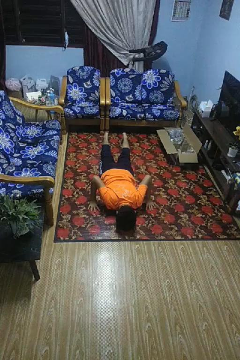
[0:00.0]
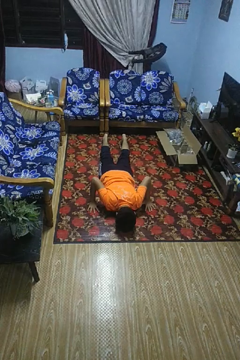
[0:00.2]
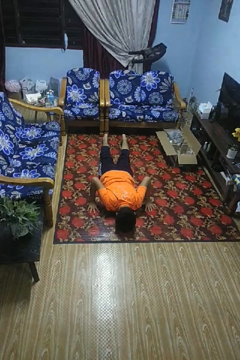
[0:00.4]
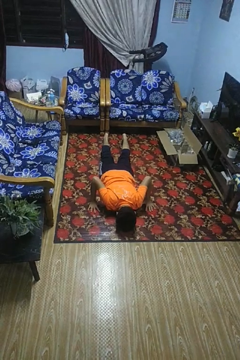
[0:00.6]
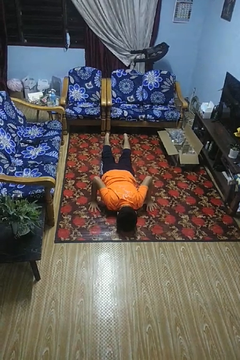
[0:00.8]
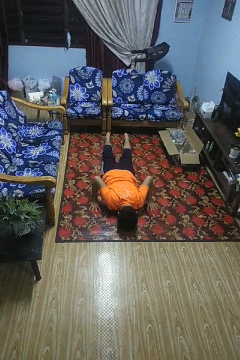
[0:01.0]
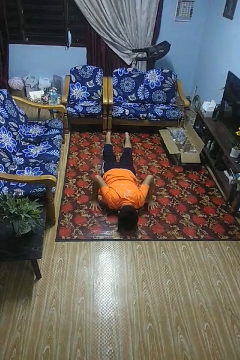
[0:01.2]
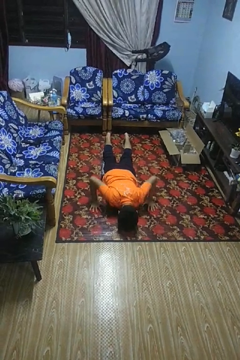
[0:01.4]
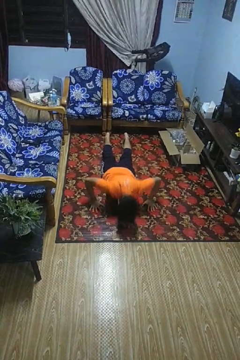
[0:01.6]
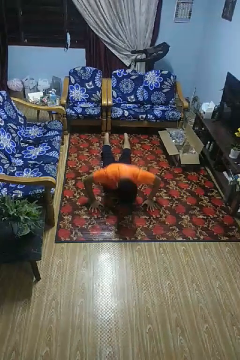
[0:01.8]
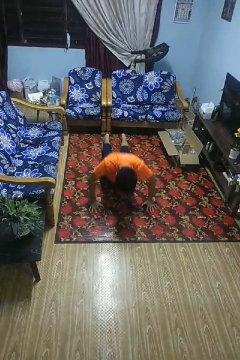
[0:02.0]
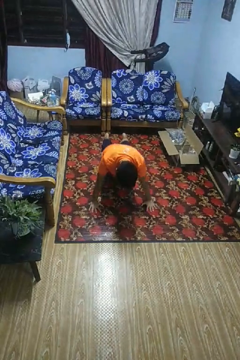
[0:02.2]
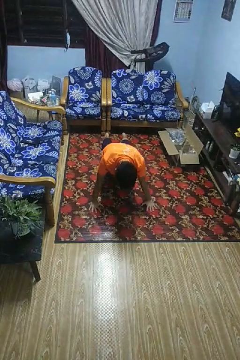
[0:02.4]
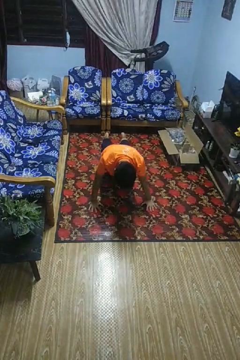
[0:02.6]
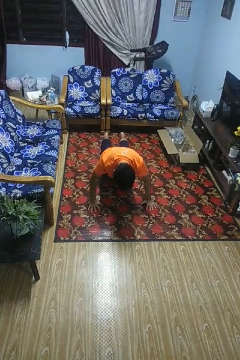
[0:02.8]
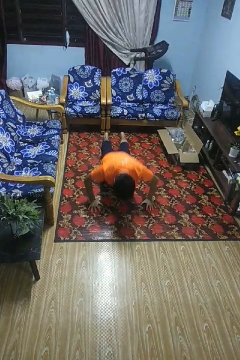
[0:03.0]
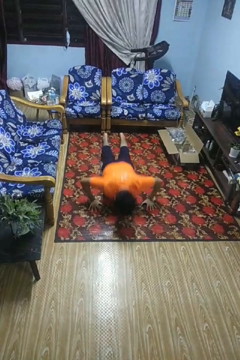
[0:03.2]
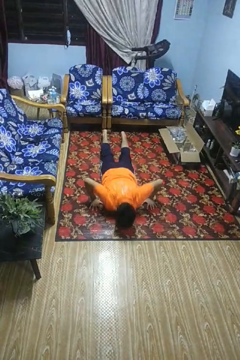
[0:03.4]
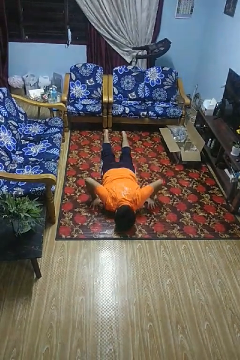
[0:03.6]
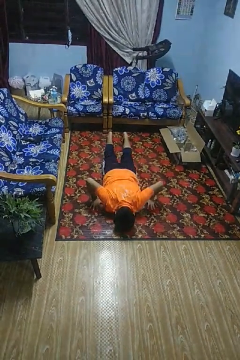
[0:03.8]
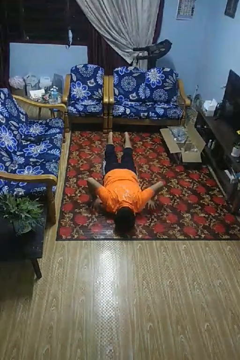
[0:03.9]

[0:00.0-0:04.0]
person exercises with pushup

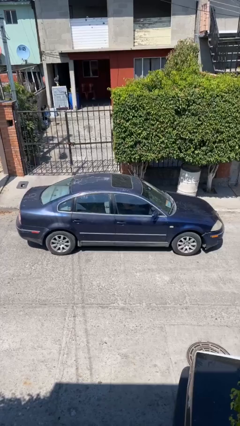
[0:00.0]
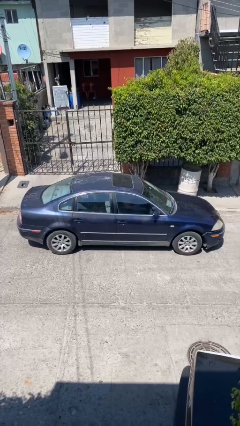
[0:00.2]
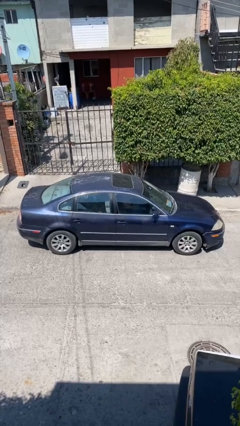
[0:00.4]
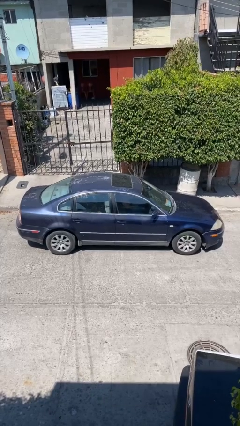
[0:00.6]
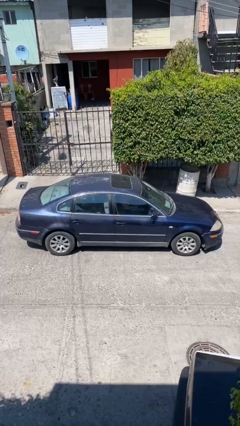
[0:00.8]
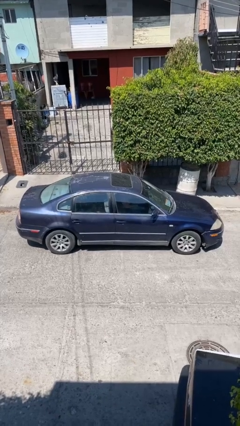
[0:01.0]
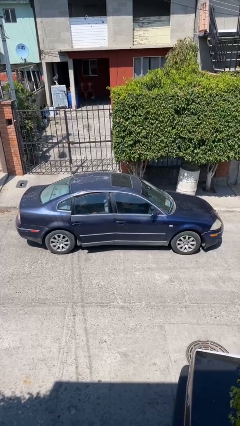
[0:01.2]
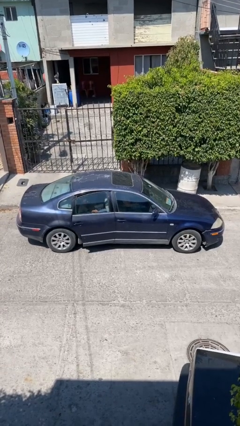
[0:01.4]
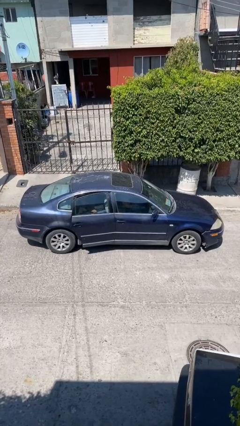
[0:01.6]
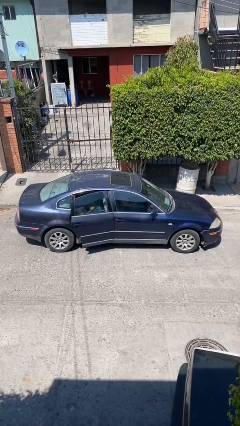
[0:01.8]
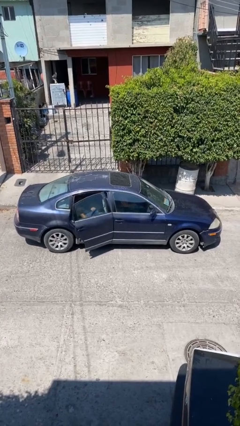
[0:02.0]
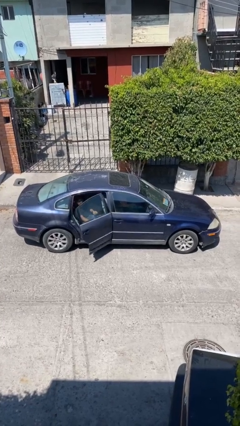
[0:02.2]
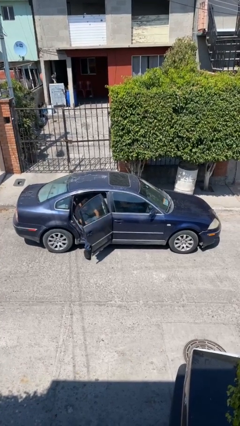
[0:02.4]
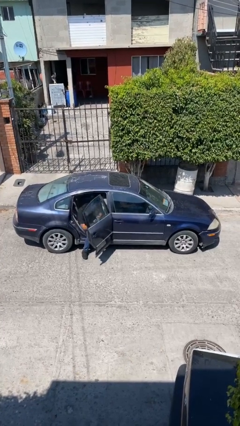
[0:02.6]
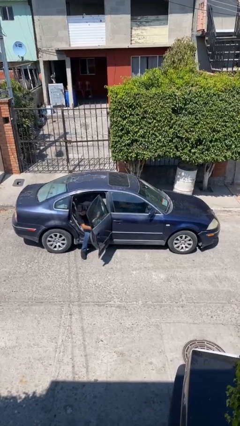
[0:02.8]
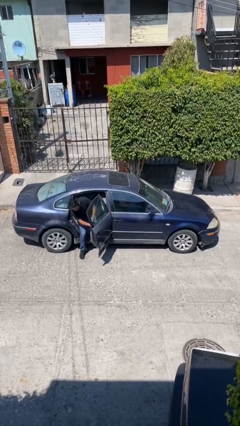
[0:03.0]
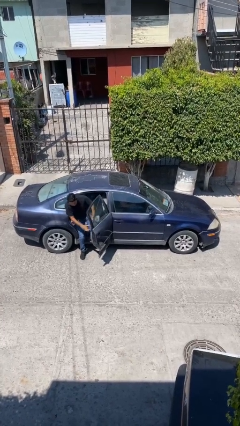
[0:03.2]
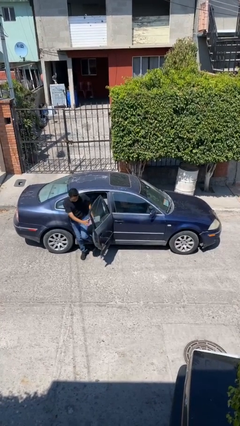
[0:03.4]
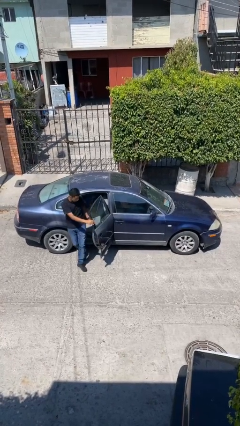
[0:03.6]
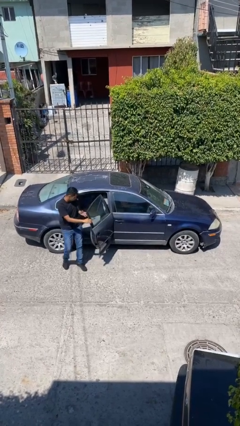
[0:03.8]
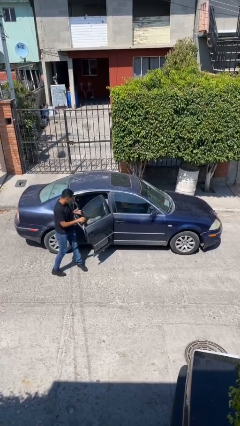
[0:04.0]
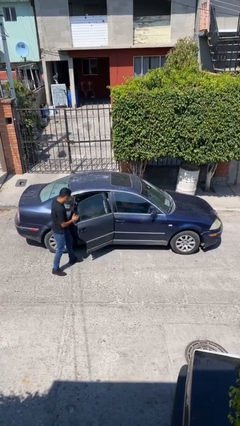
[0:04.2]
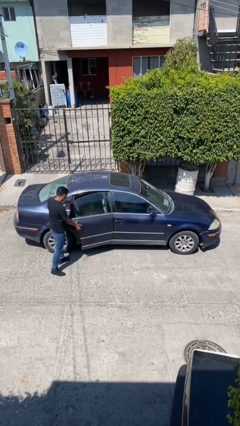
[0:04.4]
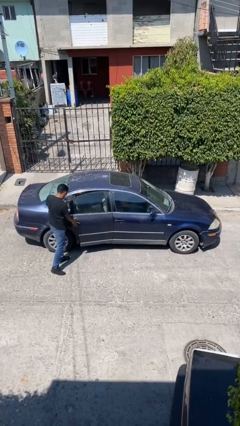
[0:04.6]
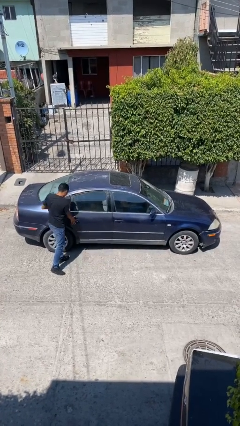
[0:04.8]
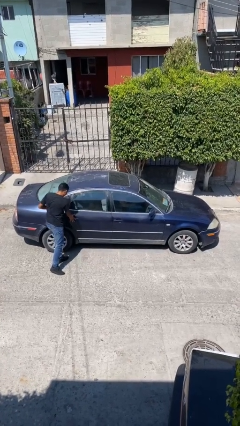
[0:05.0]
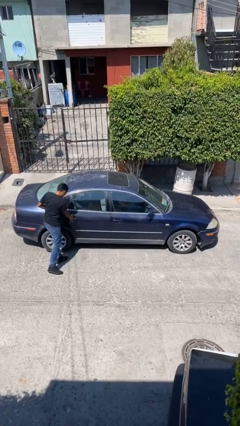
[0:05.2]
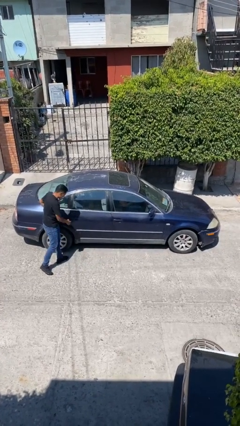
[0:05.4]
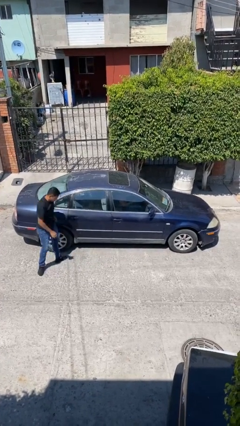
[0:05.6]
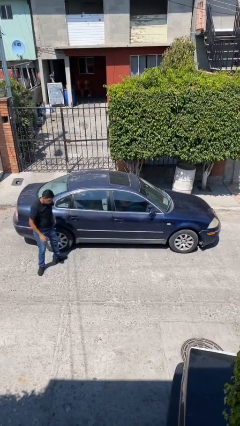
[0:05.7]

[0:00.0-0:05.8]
car drops off person

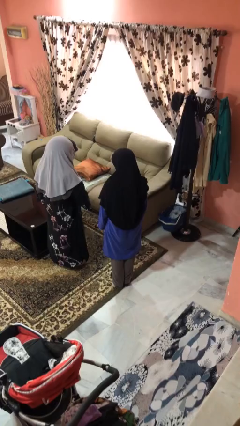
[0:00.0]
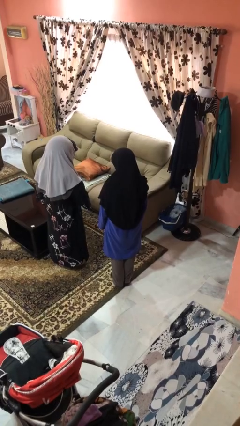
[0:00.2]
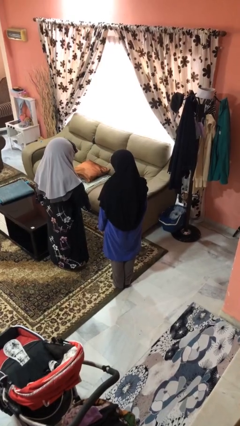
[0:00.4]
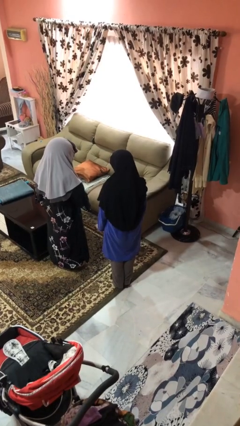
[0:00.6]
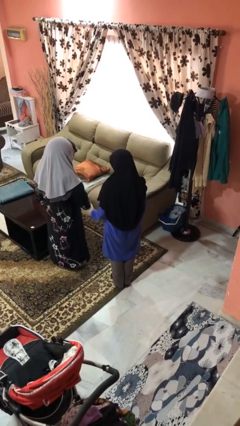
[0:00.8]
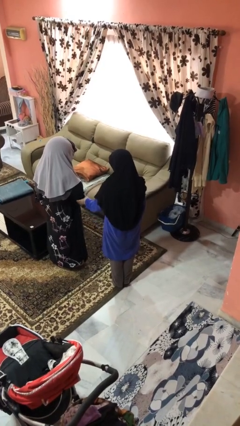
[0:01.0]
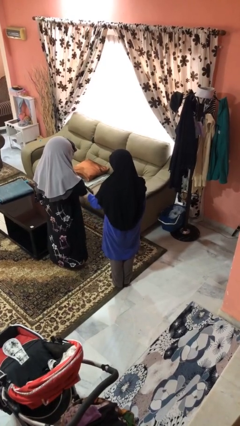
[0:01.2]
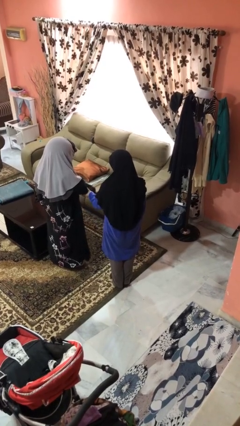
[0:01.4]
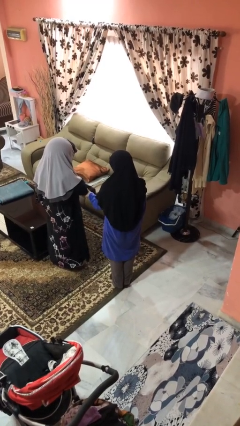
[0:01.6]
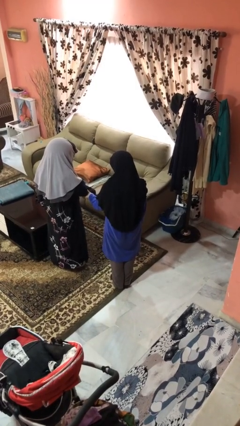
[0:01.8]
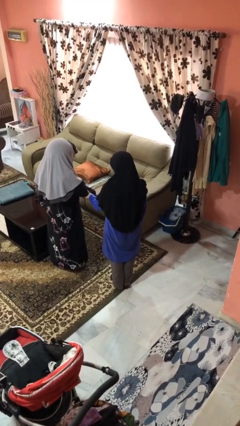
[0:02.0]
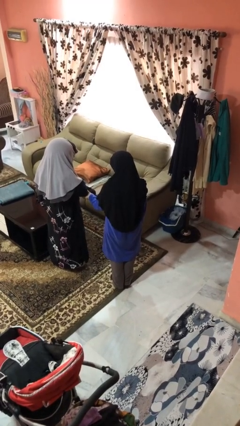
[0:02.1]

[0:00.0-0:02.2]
person grabs person by forearm

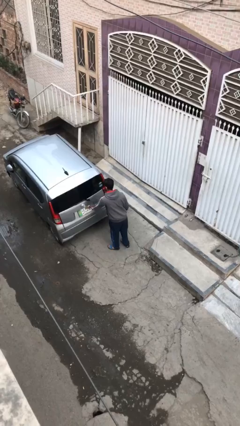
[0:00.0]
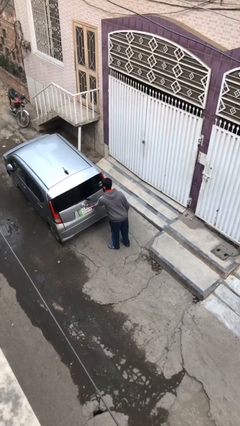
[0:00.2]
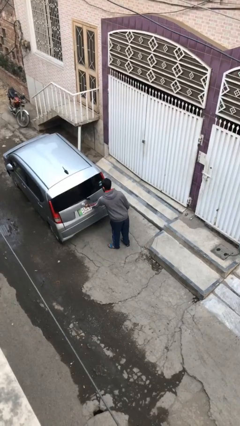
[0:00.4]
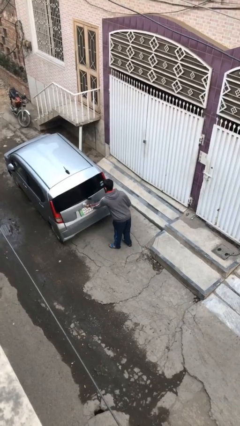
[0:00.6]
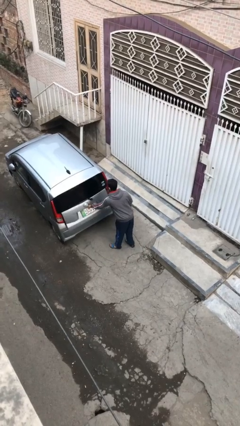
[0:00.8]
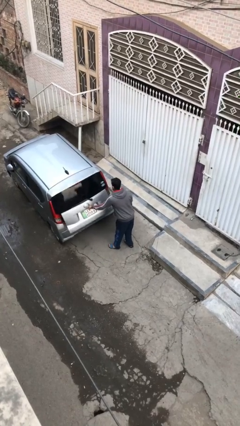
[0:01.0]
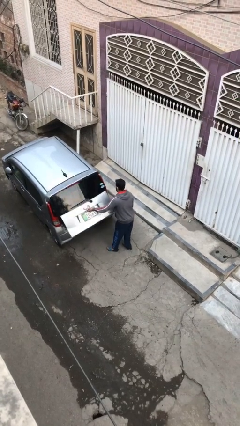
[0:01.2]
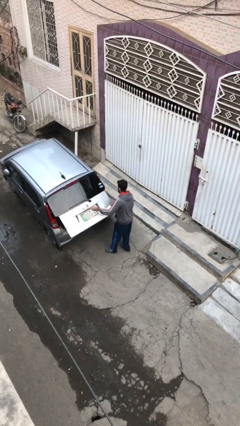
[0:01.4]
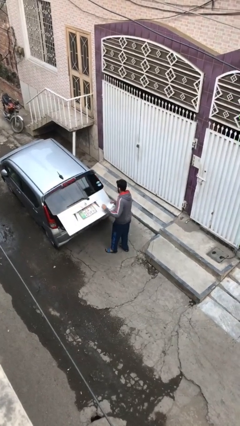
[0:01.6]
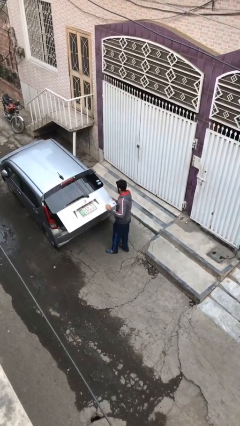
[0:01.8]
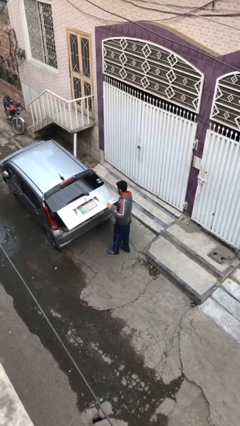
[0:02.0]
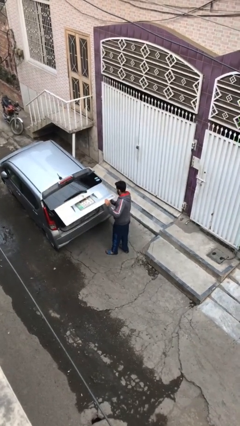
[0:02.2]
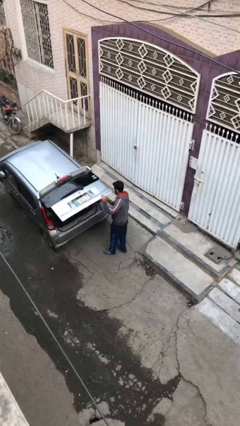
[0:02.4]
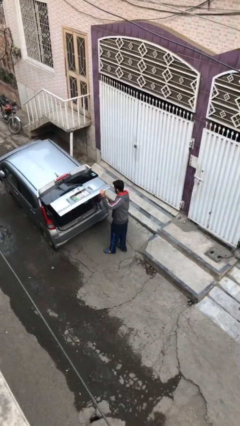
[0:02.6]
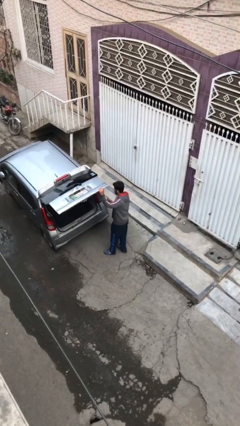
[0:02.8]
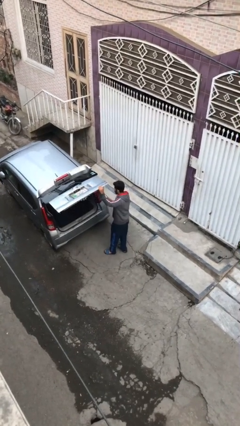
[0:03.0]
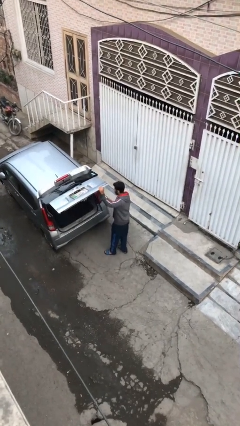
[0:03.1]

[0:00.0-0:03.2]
person opens car trunk

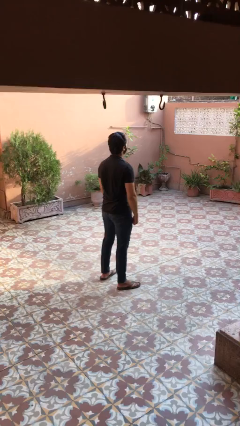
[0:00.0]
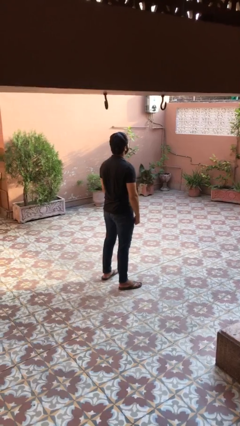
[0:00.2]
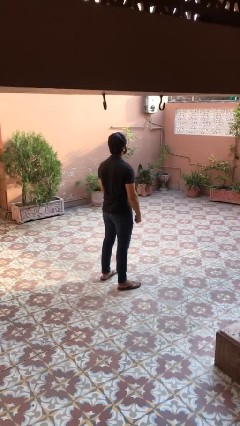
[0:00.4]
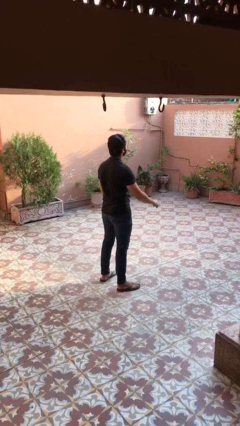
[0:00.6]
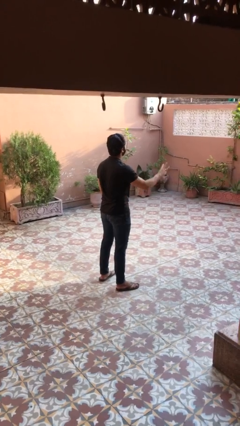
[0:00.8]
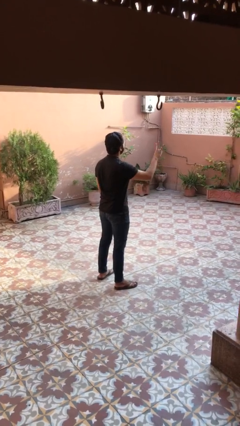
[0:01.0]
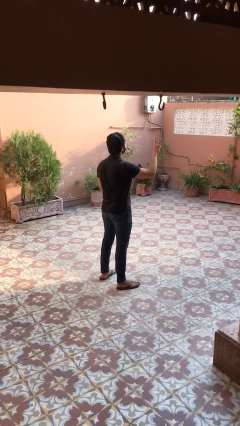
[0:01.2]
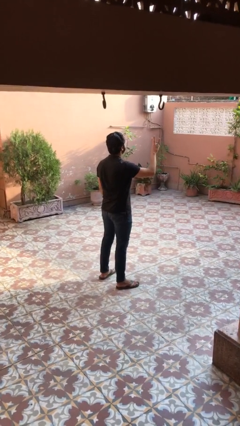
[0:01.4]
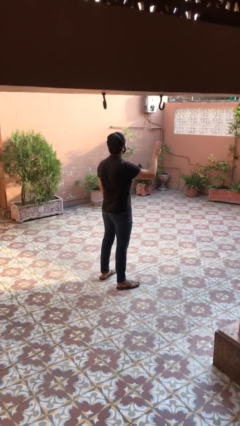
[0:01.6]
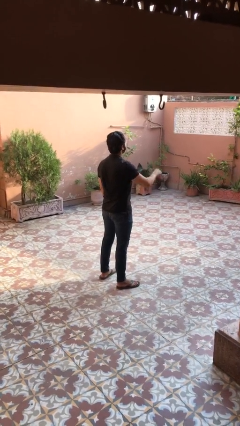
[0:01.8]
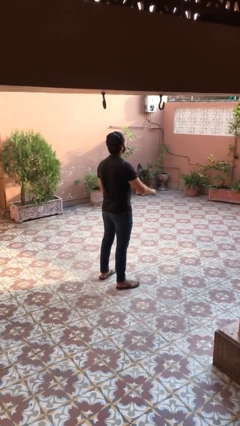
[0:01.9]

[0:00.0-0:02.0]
person gestures number three

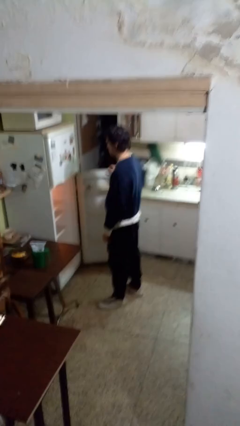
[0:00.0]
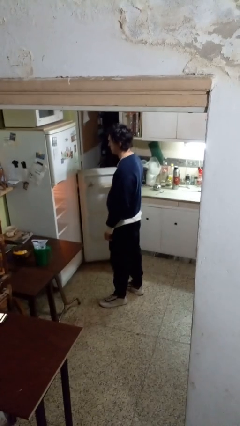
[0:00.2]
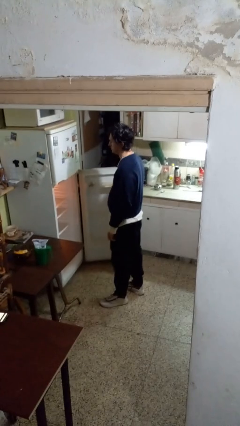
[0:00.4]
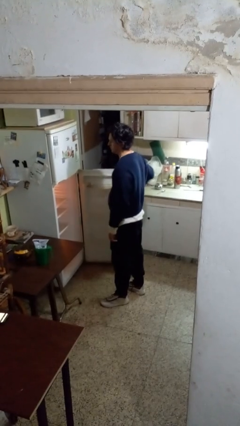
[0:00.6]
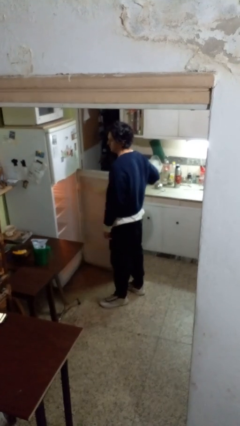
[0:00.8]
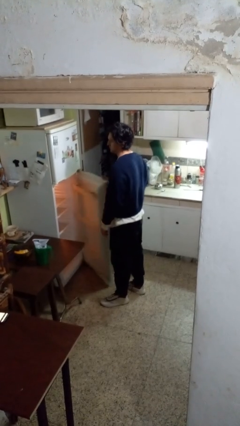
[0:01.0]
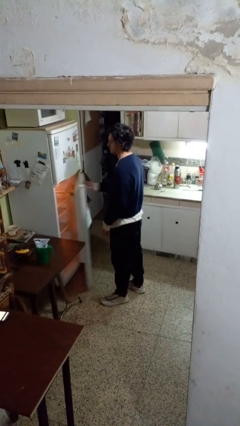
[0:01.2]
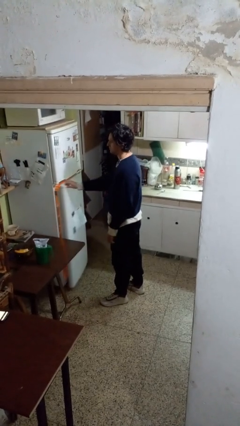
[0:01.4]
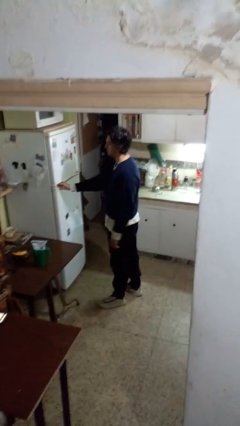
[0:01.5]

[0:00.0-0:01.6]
person closes refrigerator
